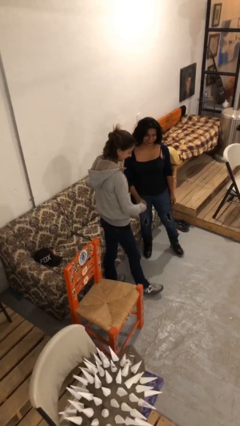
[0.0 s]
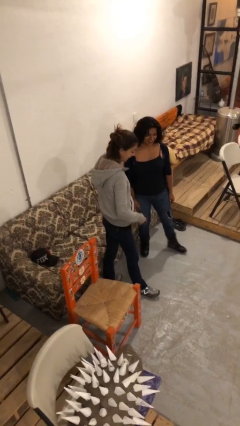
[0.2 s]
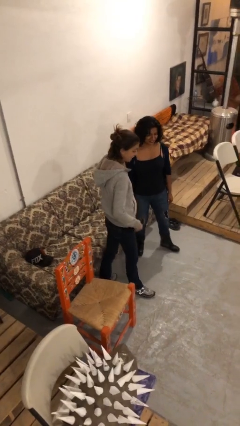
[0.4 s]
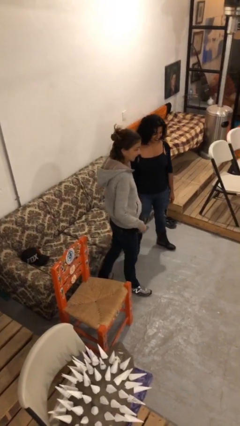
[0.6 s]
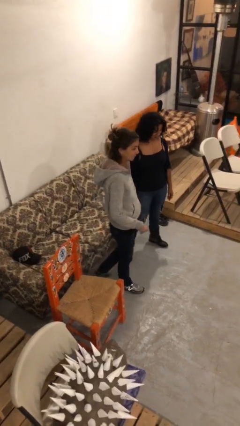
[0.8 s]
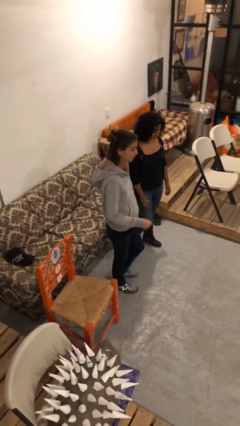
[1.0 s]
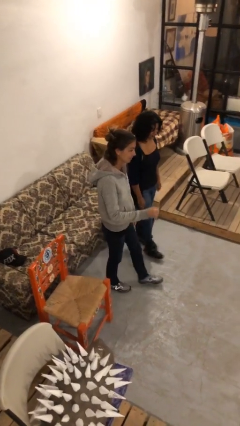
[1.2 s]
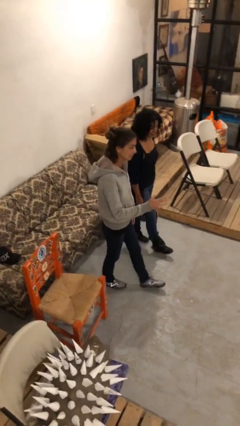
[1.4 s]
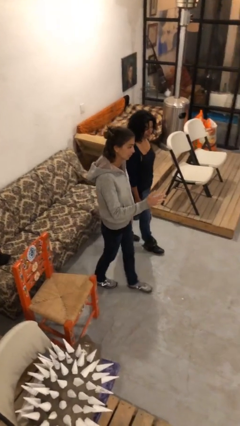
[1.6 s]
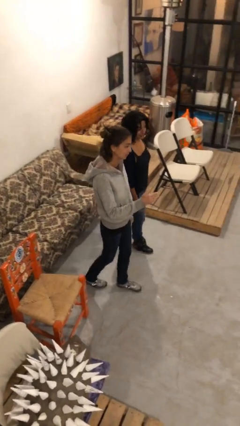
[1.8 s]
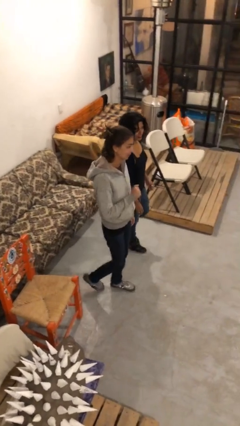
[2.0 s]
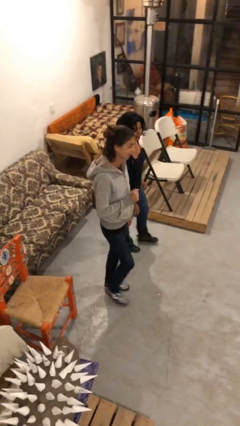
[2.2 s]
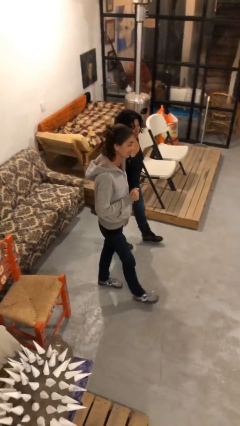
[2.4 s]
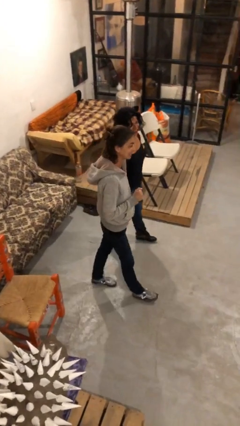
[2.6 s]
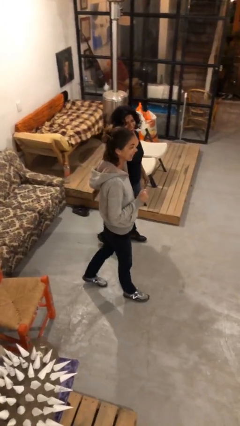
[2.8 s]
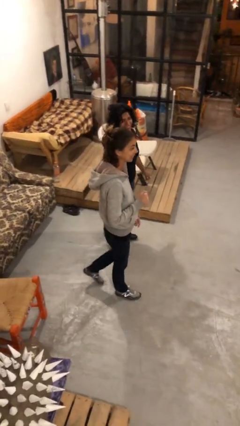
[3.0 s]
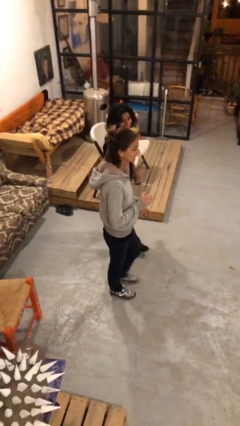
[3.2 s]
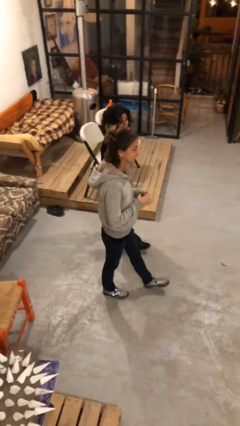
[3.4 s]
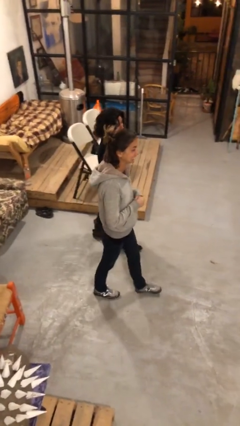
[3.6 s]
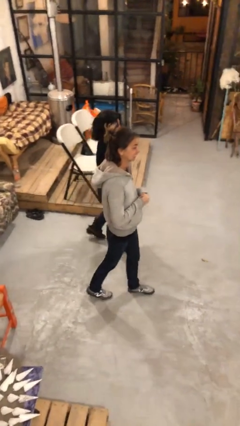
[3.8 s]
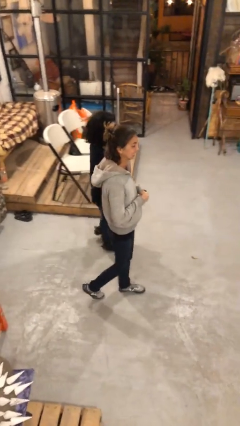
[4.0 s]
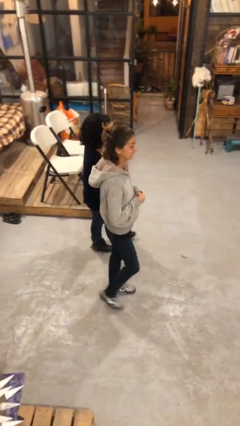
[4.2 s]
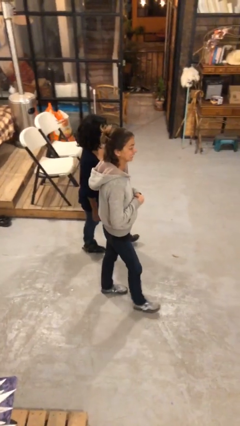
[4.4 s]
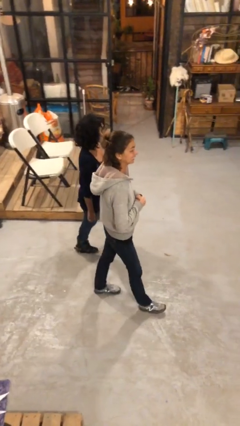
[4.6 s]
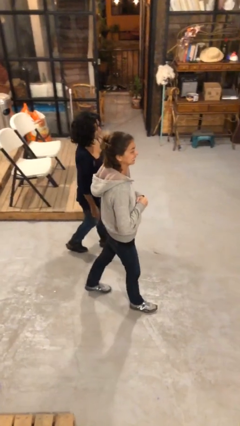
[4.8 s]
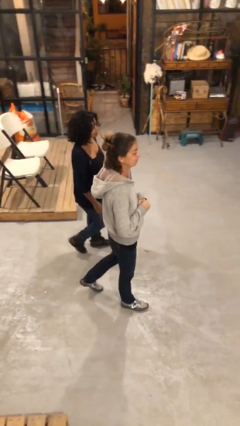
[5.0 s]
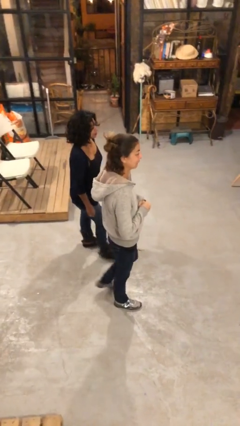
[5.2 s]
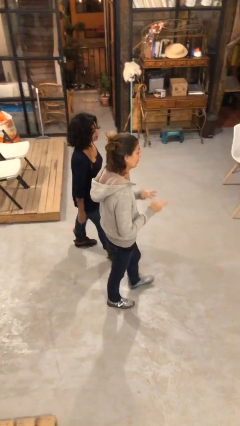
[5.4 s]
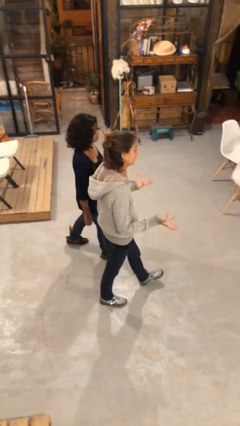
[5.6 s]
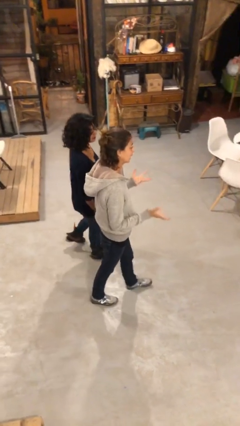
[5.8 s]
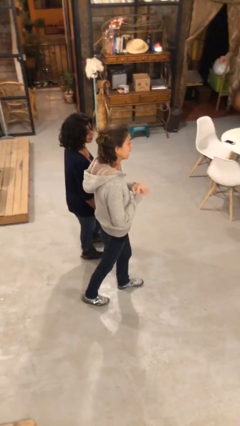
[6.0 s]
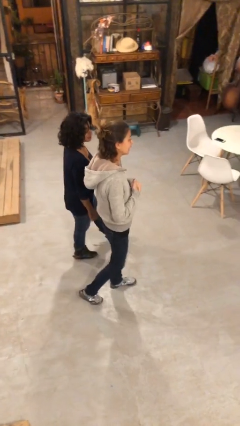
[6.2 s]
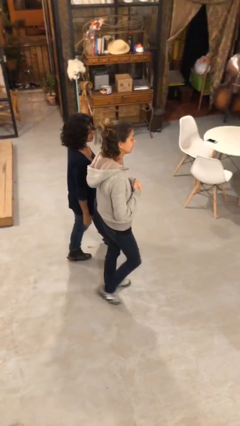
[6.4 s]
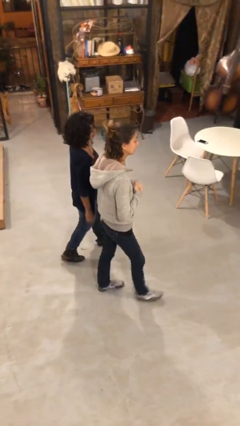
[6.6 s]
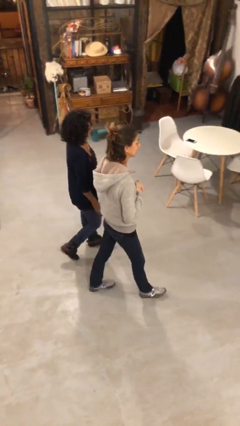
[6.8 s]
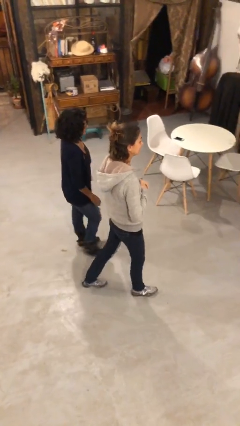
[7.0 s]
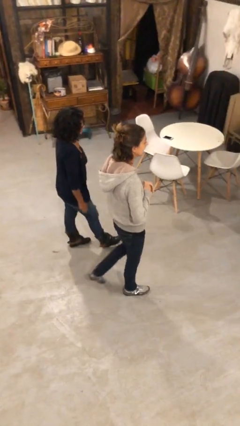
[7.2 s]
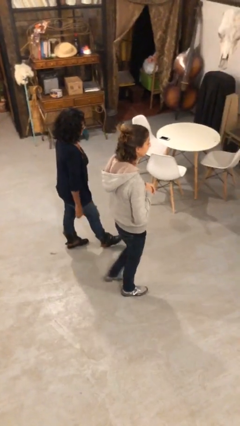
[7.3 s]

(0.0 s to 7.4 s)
person talks to person

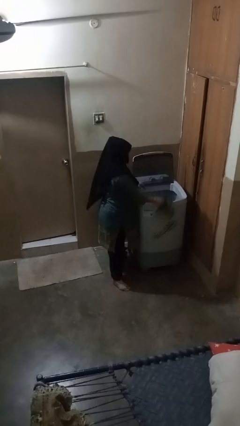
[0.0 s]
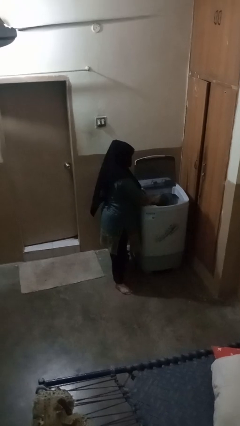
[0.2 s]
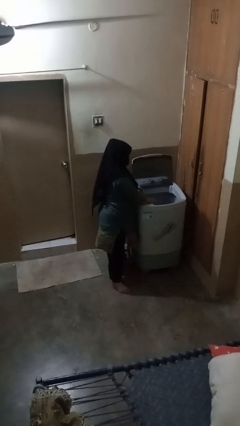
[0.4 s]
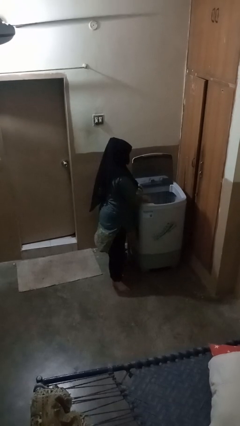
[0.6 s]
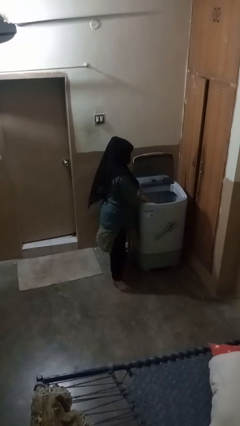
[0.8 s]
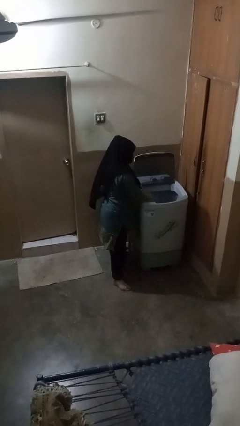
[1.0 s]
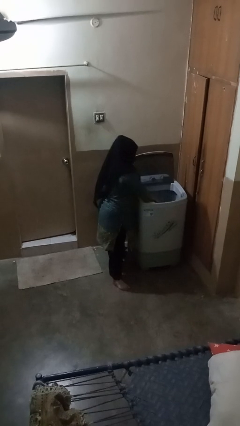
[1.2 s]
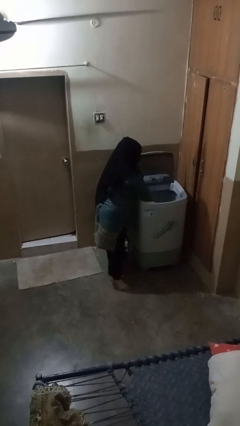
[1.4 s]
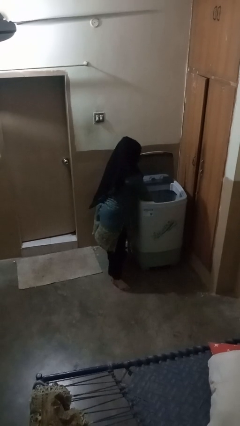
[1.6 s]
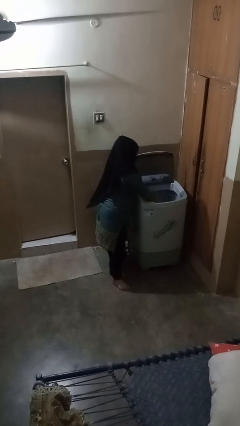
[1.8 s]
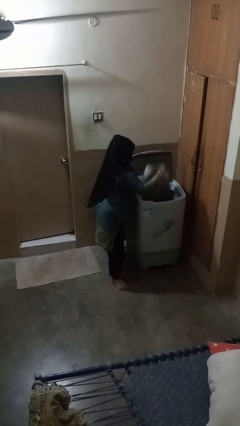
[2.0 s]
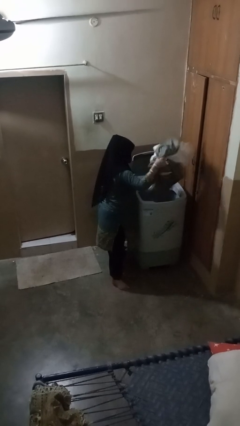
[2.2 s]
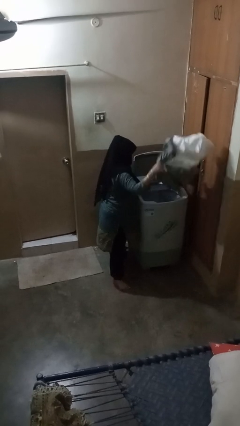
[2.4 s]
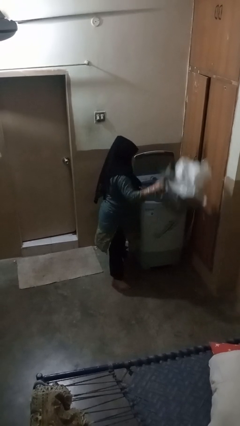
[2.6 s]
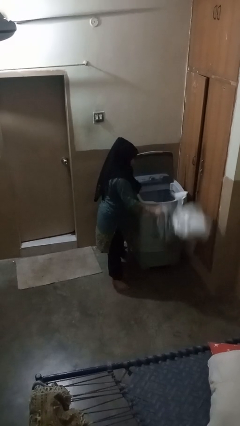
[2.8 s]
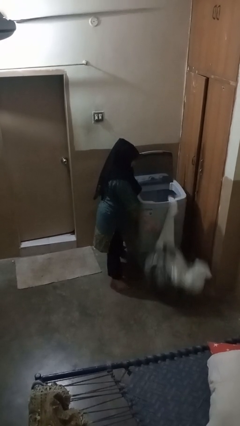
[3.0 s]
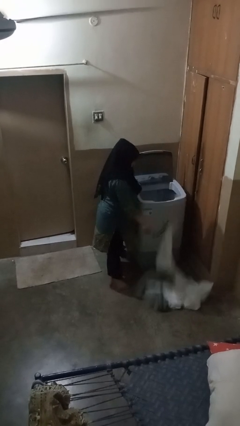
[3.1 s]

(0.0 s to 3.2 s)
person unloads clotheswasher

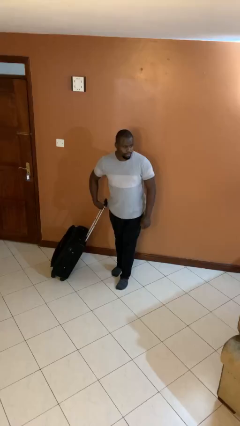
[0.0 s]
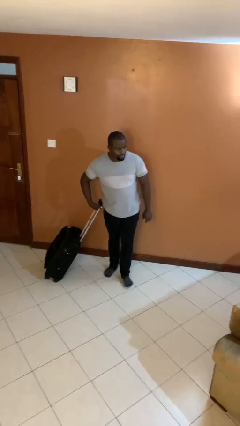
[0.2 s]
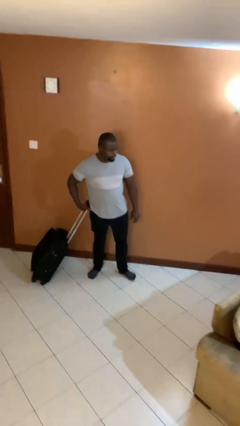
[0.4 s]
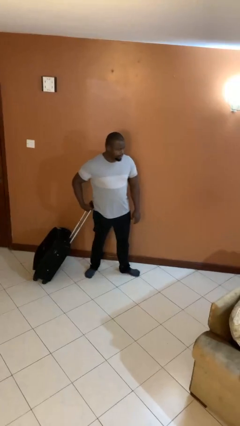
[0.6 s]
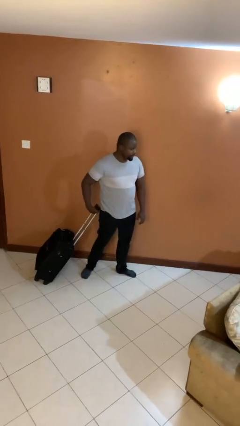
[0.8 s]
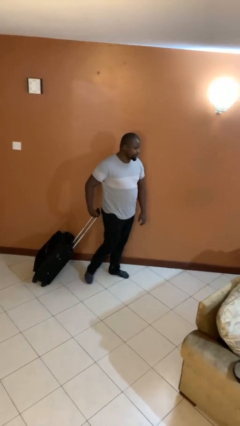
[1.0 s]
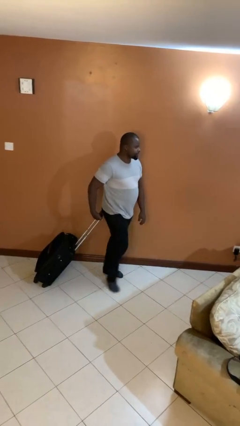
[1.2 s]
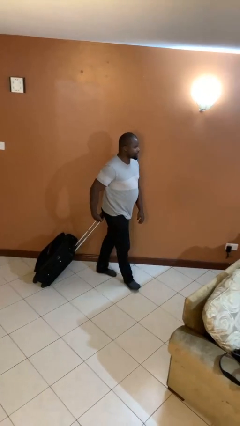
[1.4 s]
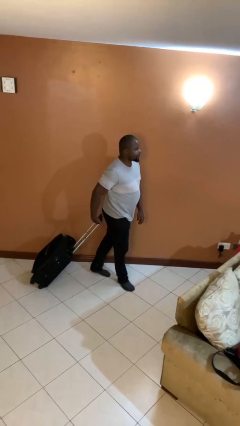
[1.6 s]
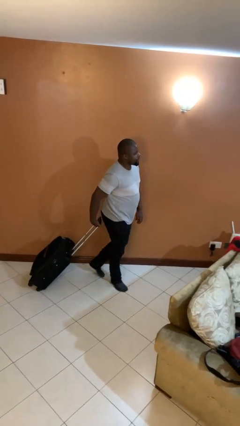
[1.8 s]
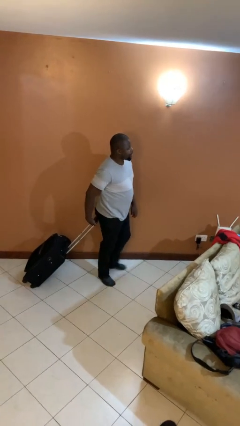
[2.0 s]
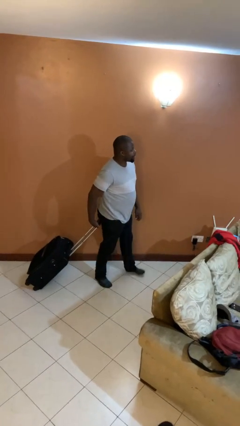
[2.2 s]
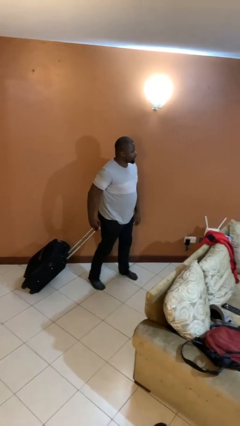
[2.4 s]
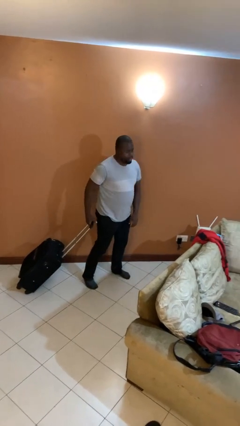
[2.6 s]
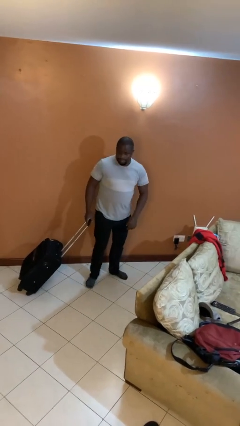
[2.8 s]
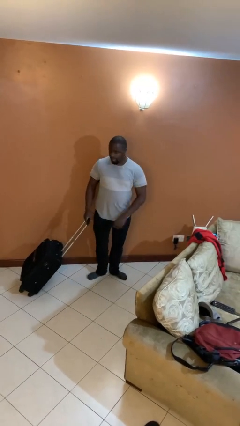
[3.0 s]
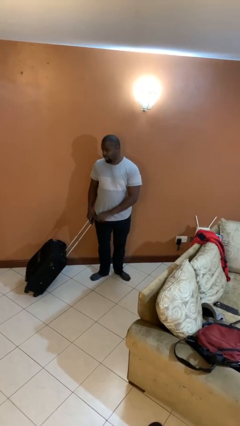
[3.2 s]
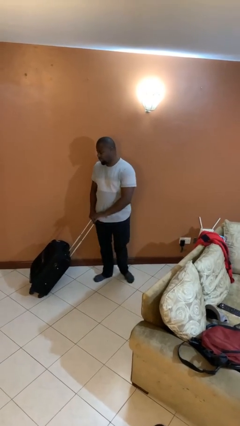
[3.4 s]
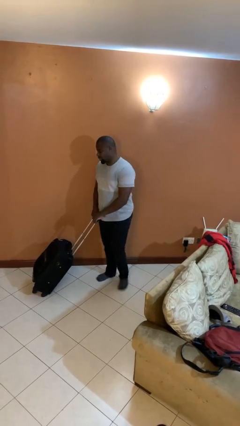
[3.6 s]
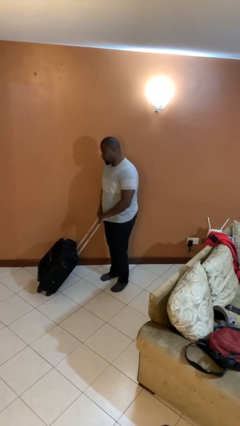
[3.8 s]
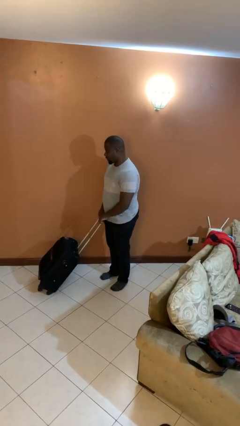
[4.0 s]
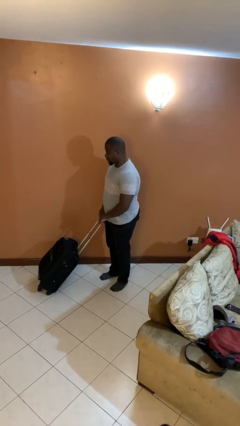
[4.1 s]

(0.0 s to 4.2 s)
person pulls wheeled cart

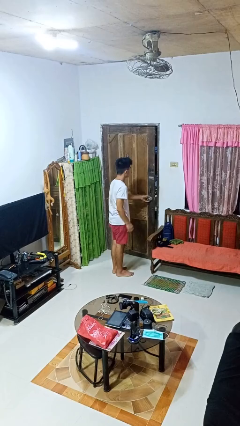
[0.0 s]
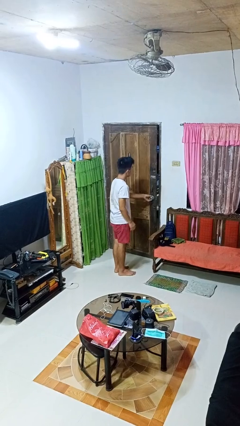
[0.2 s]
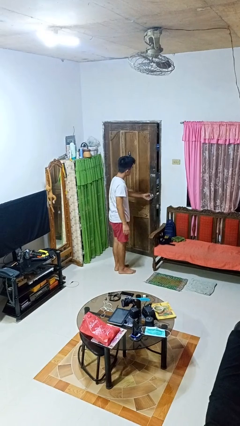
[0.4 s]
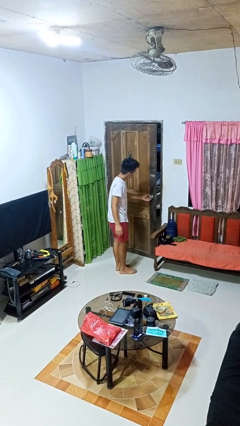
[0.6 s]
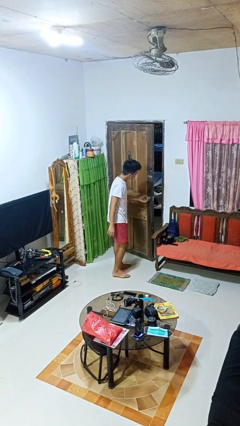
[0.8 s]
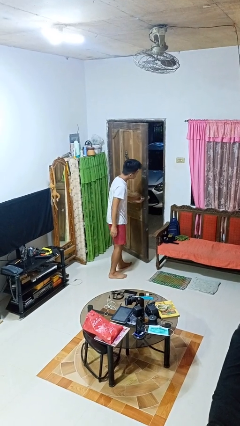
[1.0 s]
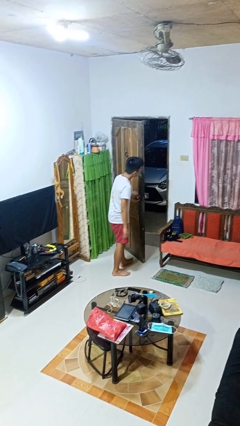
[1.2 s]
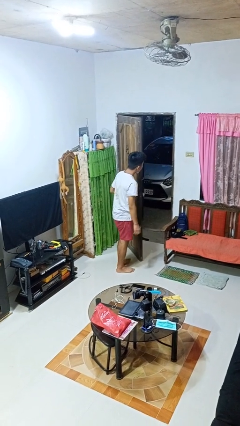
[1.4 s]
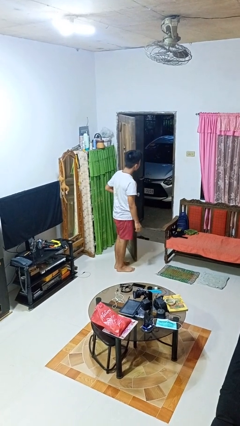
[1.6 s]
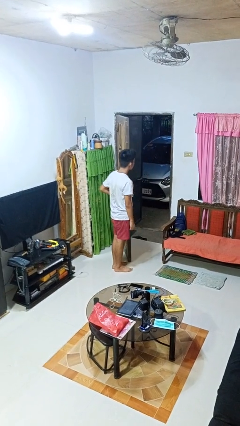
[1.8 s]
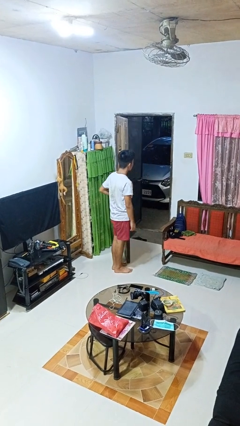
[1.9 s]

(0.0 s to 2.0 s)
person opens facility door

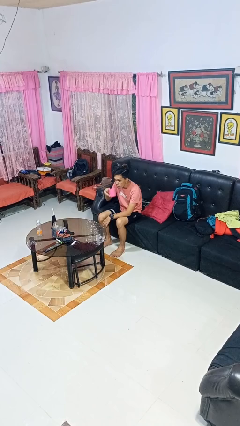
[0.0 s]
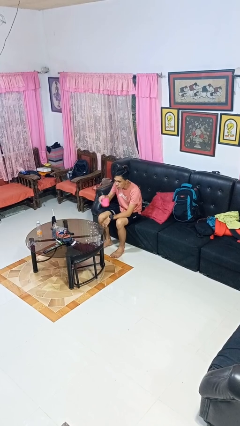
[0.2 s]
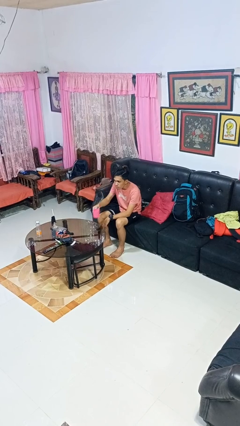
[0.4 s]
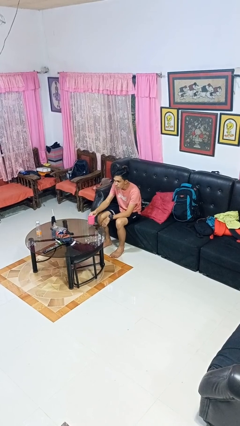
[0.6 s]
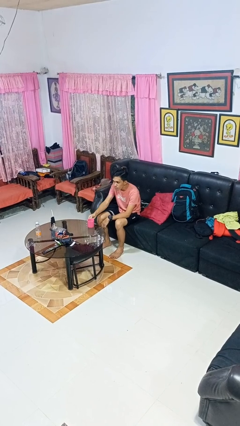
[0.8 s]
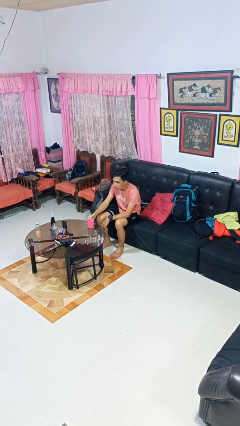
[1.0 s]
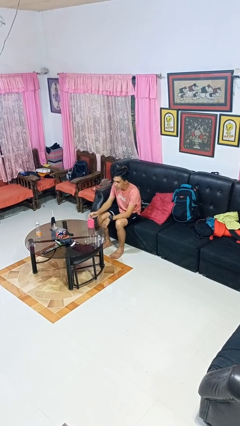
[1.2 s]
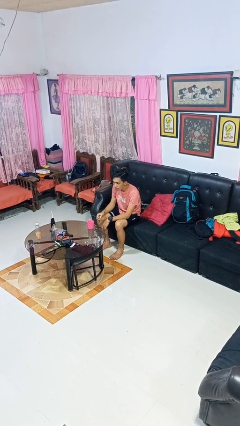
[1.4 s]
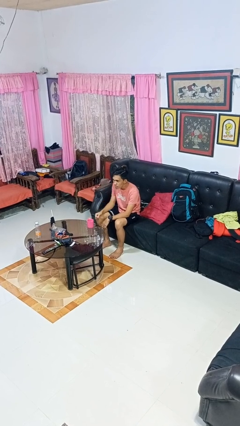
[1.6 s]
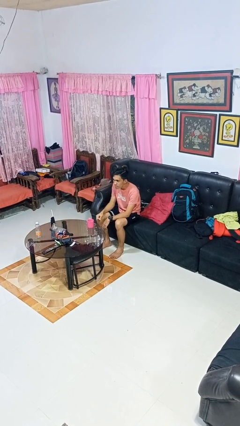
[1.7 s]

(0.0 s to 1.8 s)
person puts down object on table
